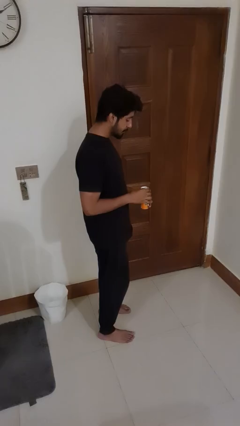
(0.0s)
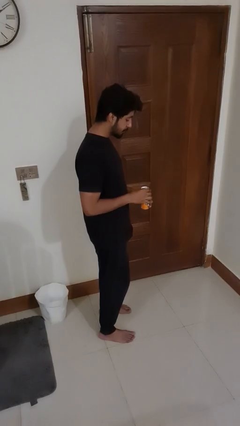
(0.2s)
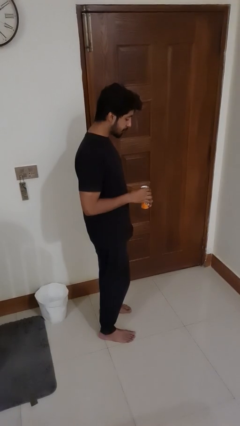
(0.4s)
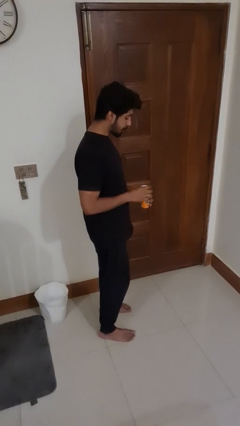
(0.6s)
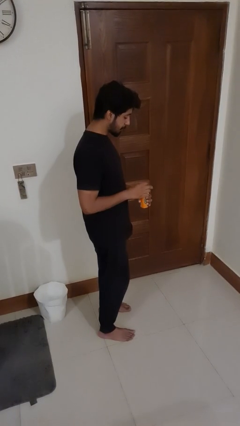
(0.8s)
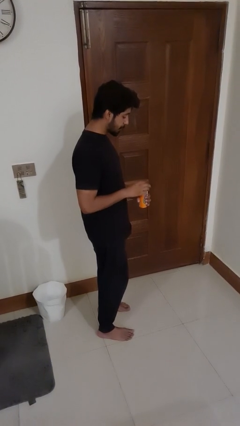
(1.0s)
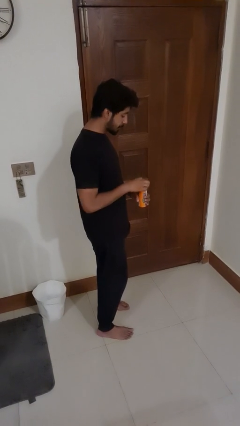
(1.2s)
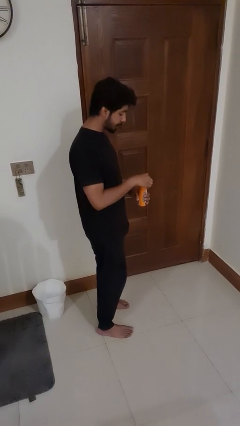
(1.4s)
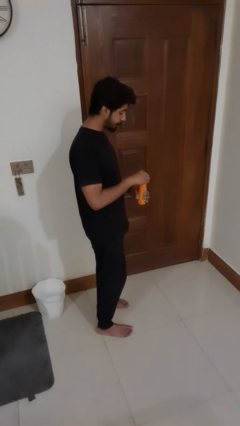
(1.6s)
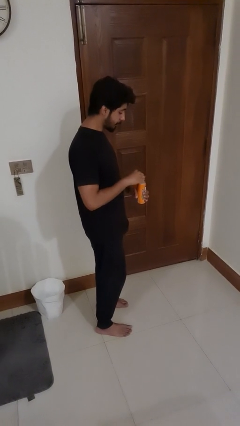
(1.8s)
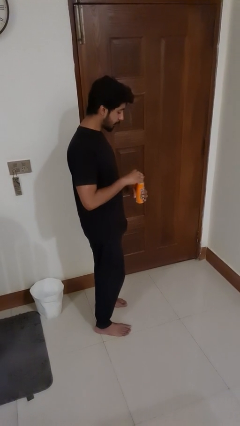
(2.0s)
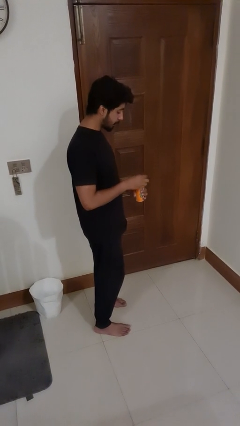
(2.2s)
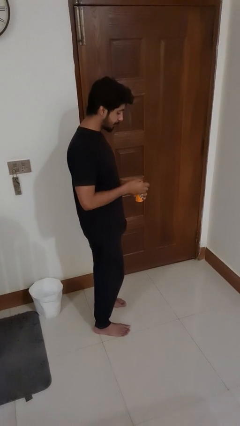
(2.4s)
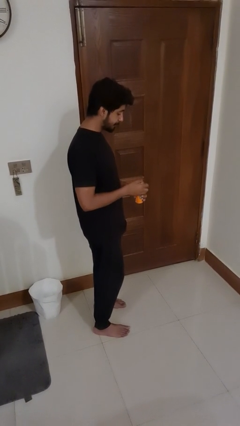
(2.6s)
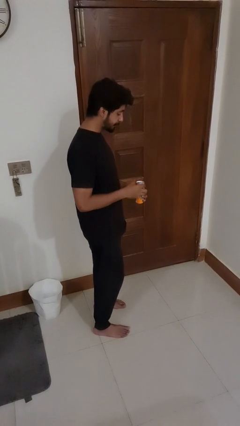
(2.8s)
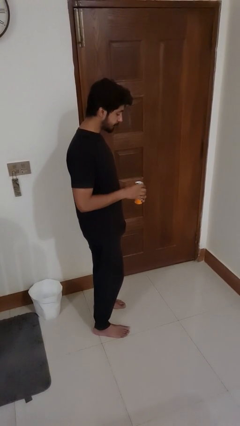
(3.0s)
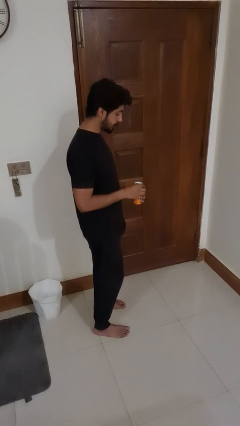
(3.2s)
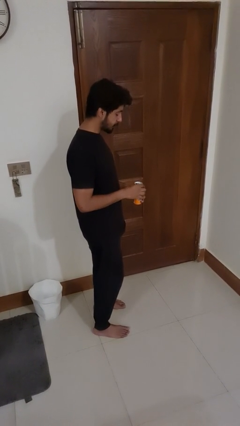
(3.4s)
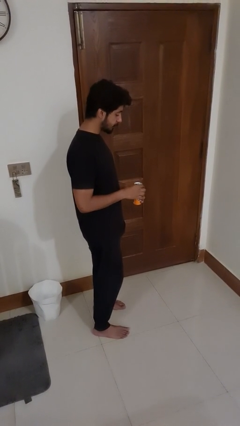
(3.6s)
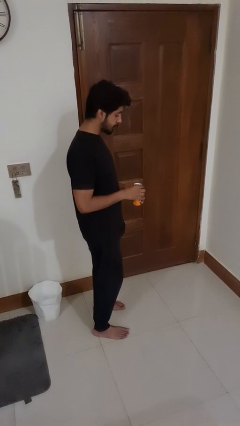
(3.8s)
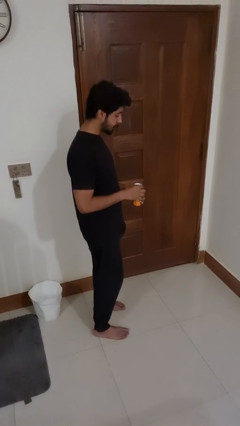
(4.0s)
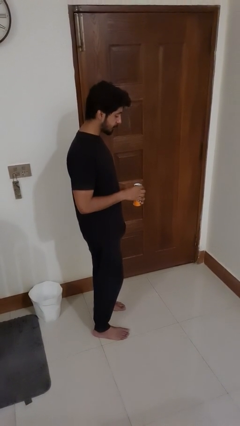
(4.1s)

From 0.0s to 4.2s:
person opens beverage can

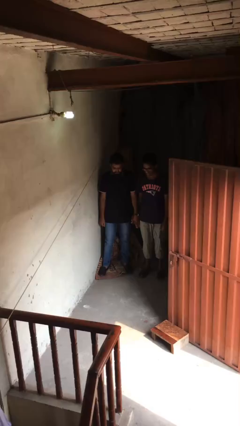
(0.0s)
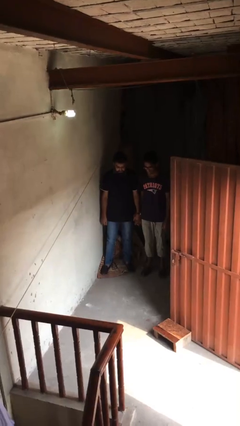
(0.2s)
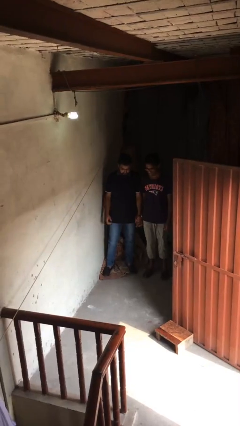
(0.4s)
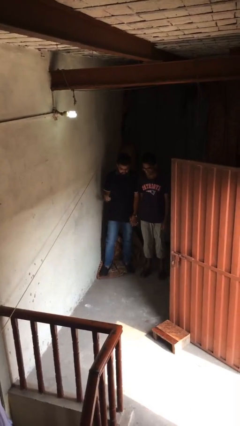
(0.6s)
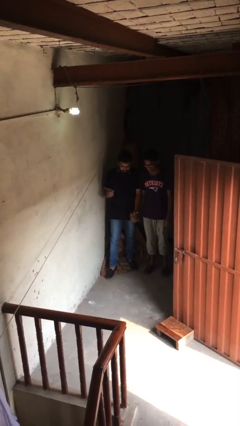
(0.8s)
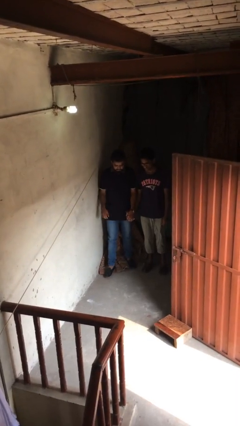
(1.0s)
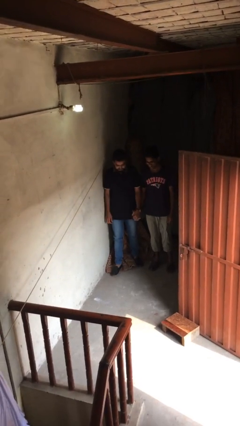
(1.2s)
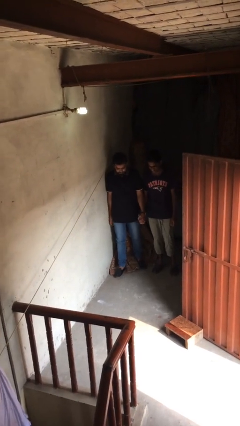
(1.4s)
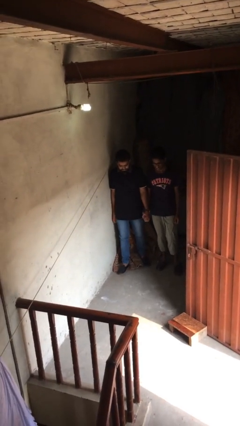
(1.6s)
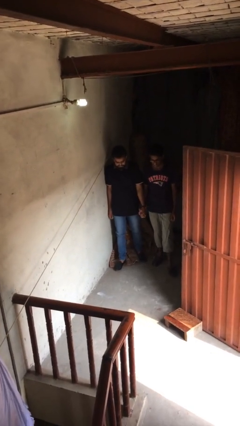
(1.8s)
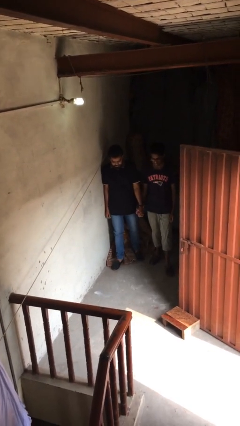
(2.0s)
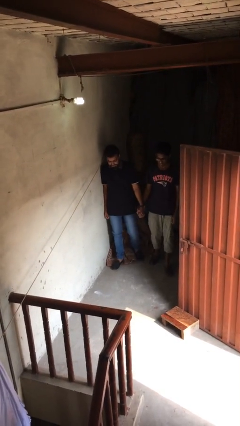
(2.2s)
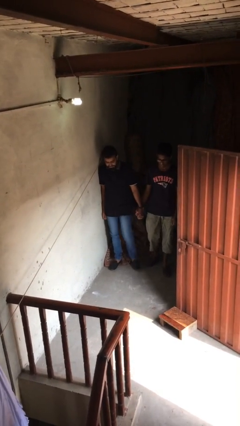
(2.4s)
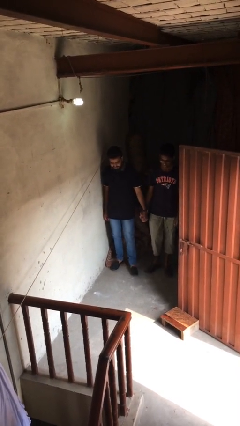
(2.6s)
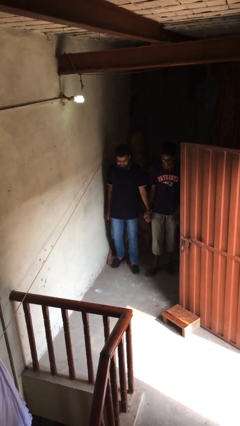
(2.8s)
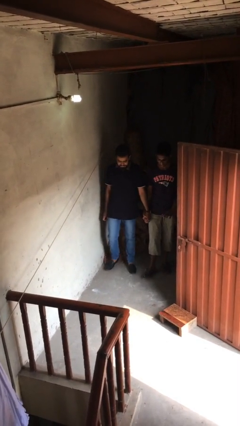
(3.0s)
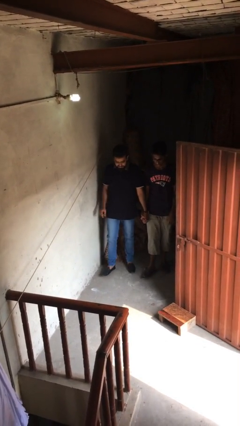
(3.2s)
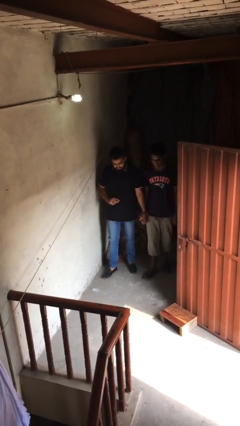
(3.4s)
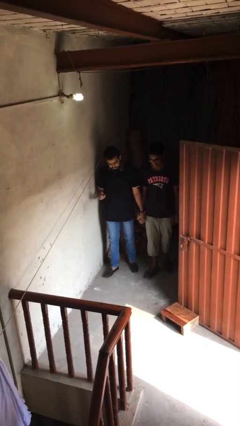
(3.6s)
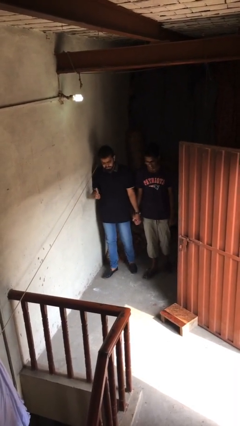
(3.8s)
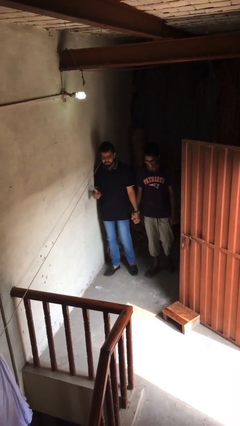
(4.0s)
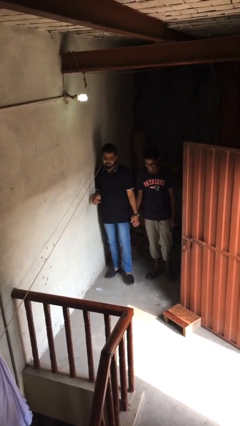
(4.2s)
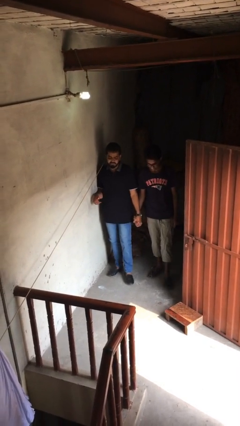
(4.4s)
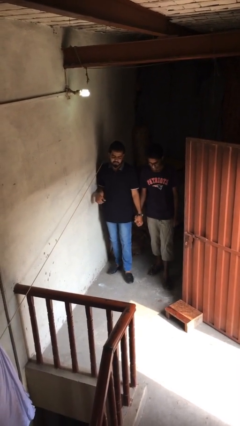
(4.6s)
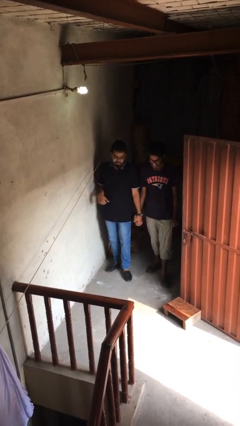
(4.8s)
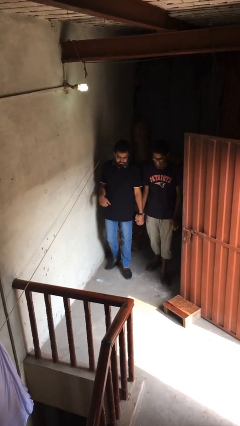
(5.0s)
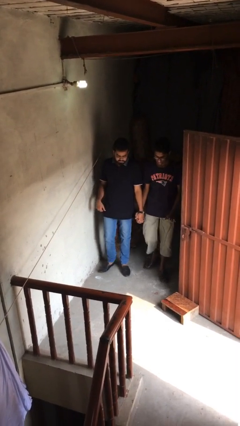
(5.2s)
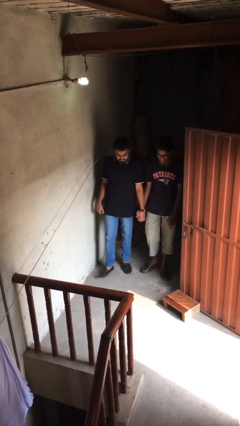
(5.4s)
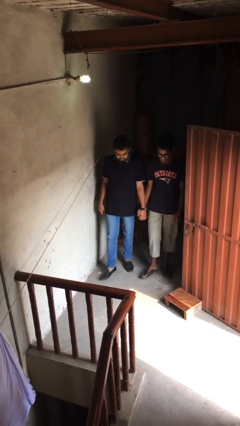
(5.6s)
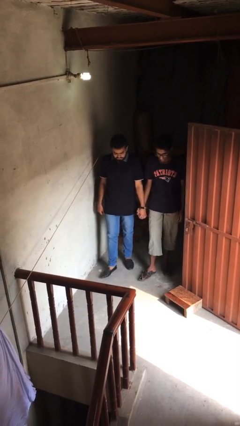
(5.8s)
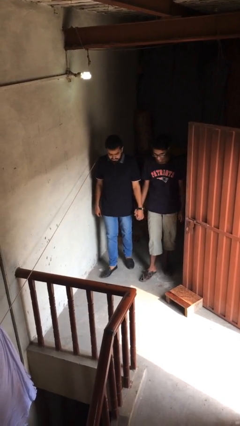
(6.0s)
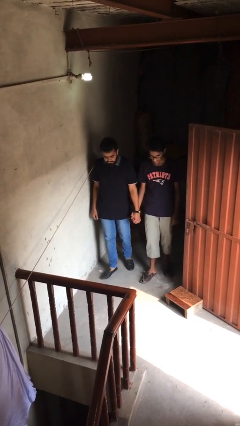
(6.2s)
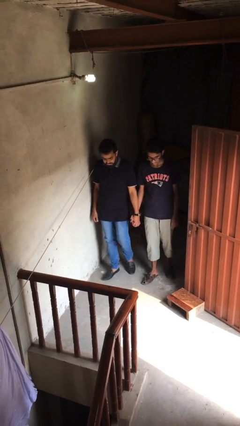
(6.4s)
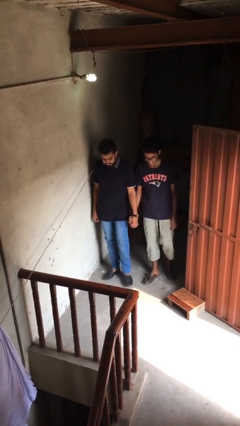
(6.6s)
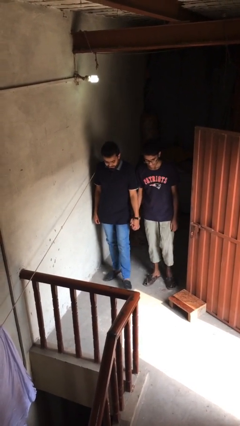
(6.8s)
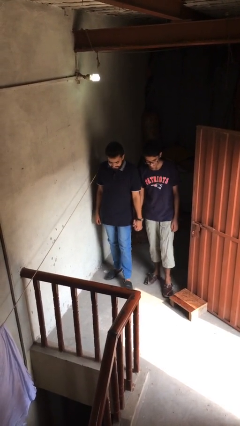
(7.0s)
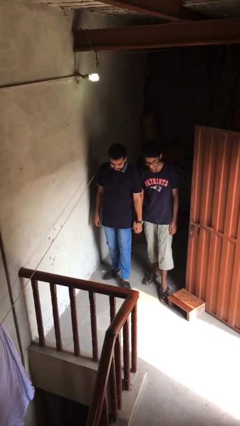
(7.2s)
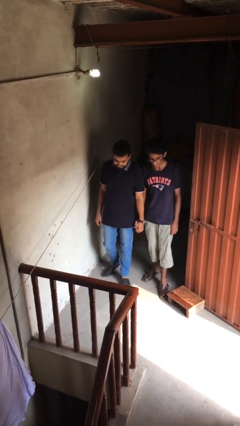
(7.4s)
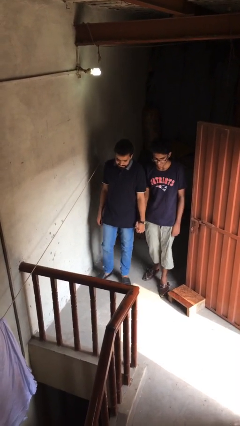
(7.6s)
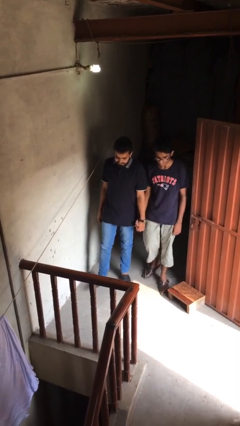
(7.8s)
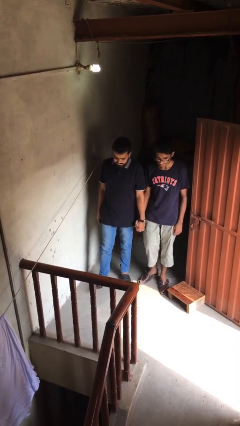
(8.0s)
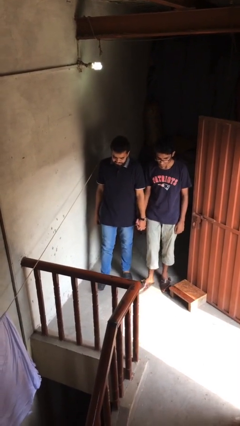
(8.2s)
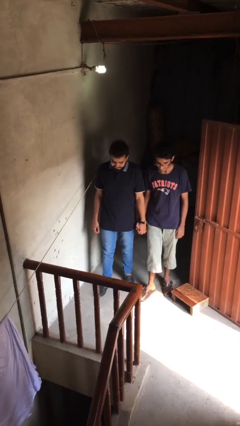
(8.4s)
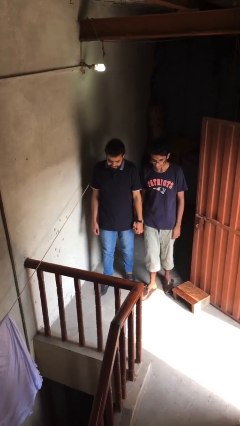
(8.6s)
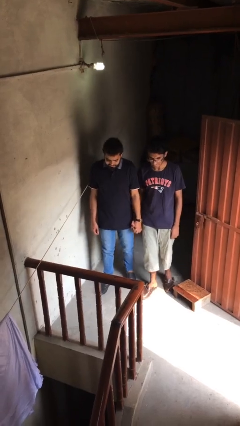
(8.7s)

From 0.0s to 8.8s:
person holds hand

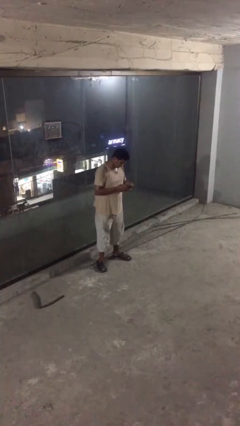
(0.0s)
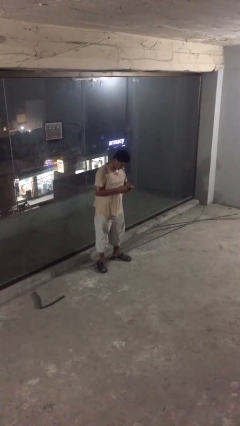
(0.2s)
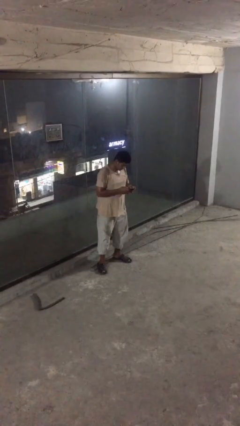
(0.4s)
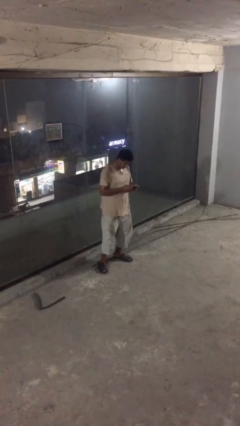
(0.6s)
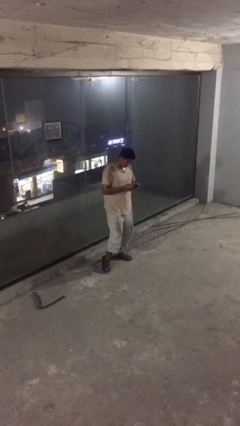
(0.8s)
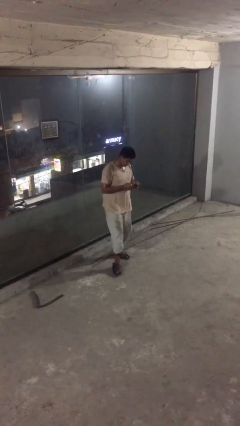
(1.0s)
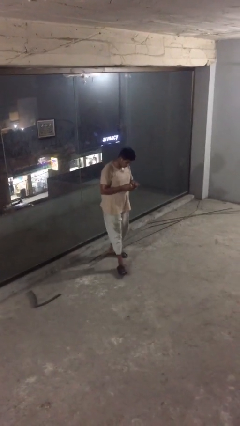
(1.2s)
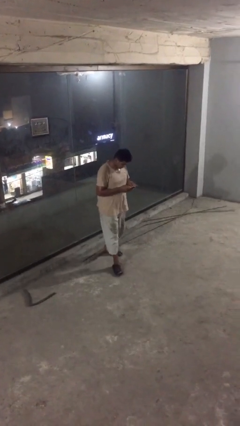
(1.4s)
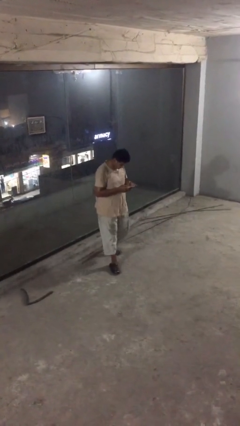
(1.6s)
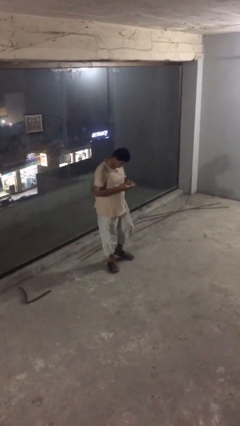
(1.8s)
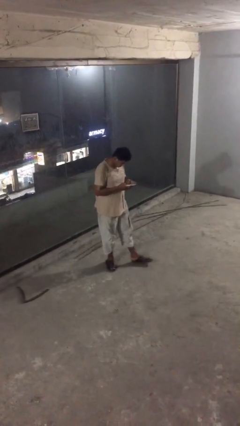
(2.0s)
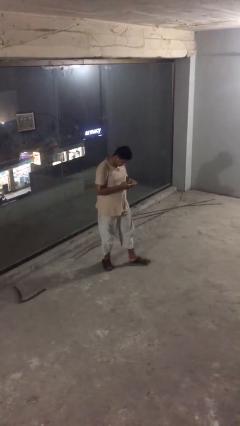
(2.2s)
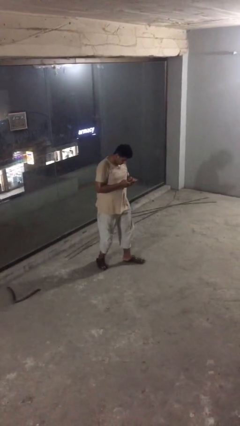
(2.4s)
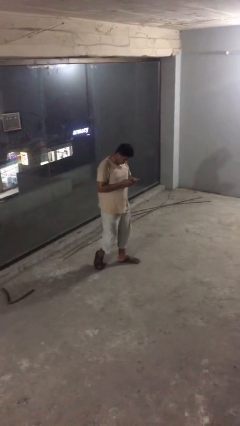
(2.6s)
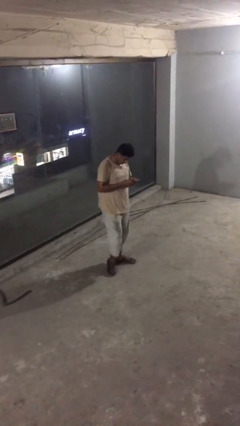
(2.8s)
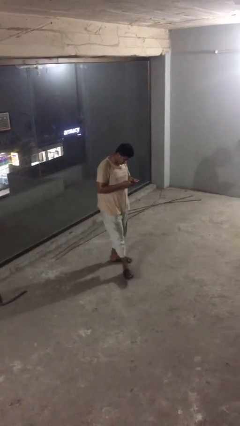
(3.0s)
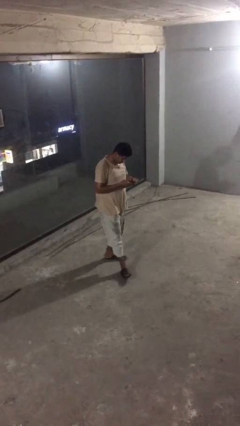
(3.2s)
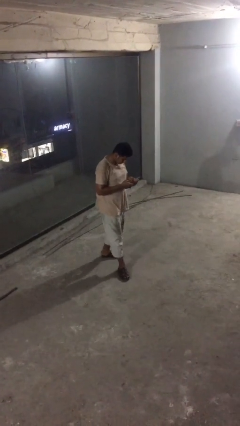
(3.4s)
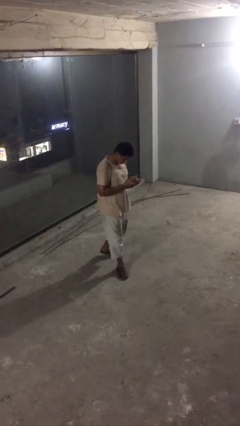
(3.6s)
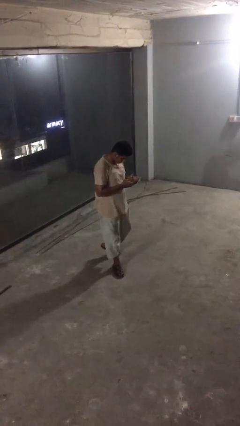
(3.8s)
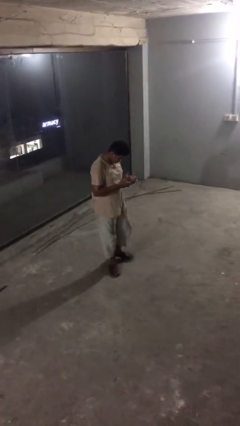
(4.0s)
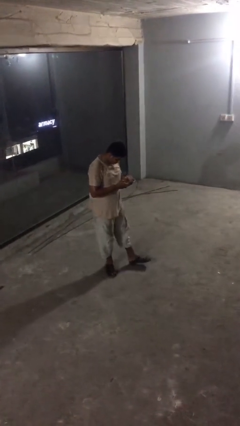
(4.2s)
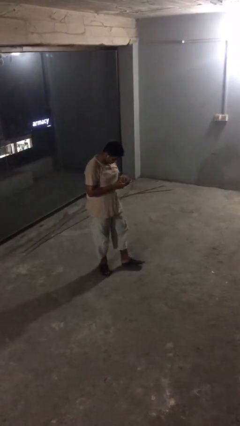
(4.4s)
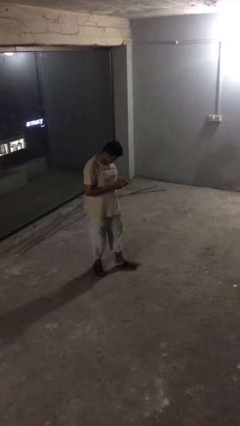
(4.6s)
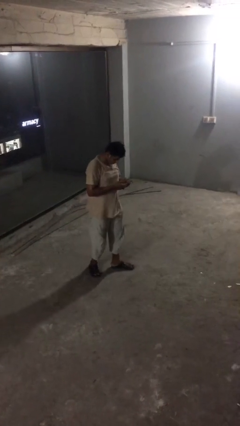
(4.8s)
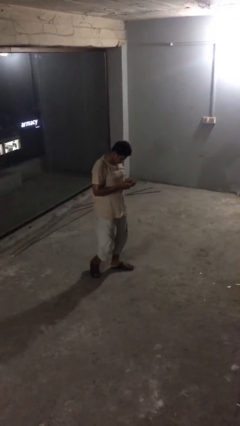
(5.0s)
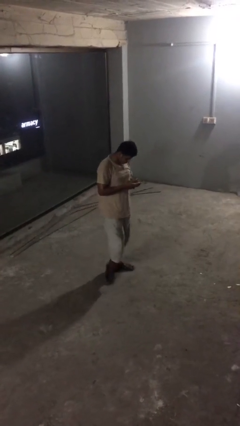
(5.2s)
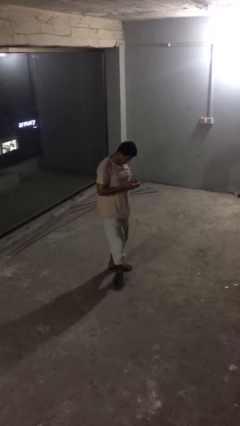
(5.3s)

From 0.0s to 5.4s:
person texts on phone
